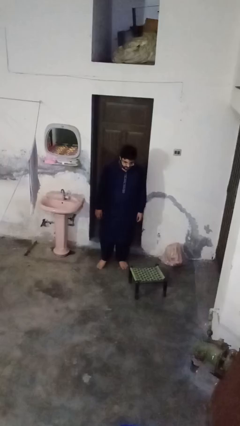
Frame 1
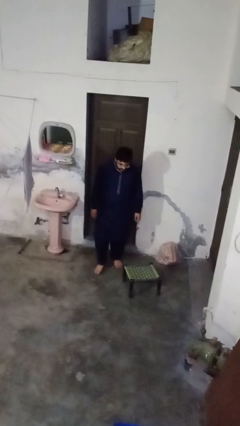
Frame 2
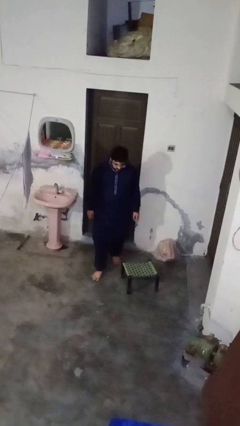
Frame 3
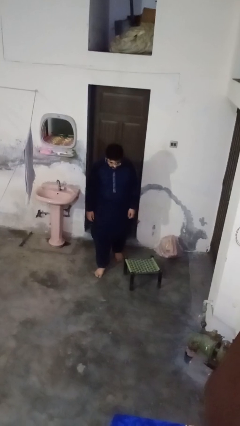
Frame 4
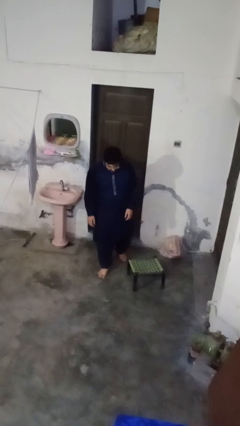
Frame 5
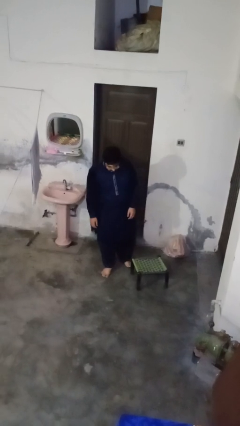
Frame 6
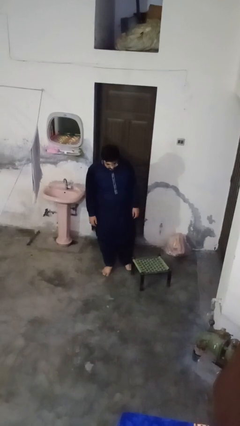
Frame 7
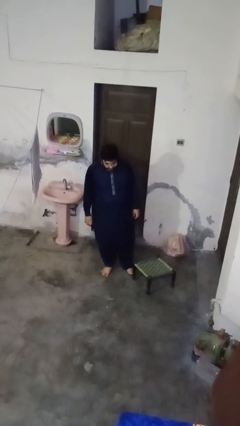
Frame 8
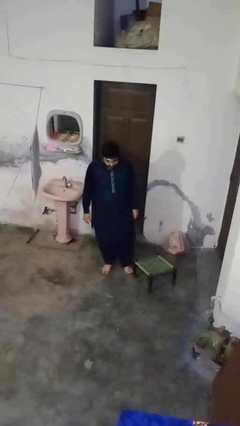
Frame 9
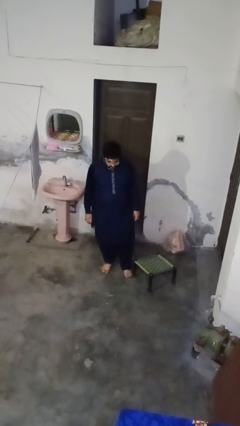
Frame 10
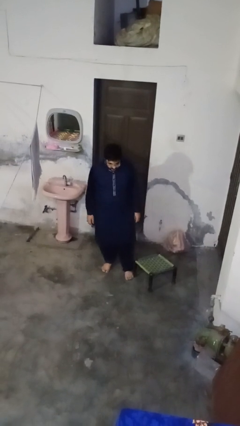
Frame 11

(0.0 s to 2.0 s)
person trips on object on floor

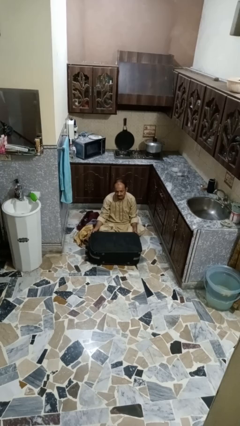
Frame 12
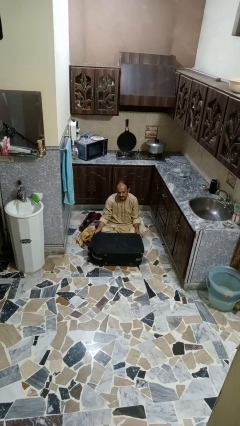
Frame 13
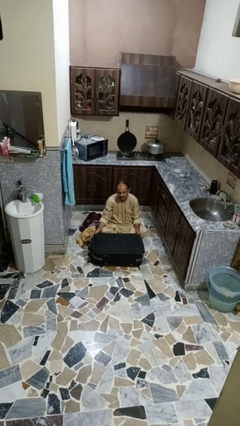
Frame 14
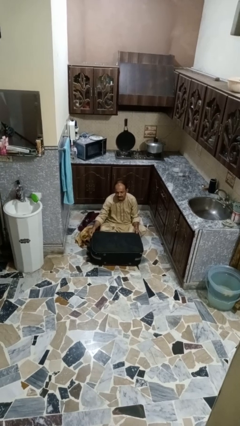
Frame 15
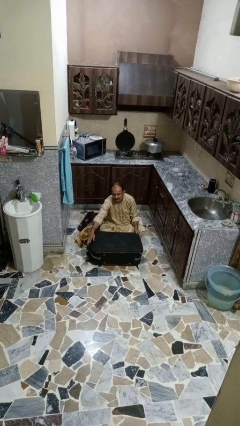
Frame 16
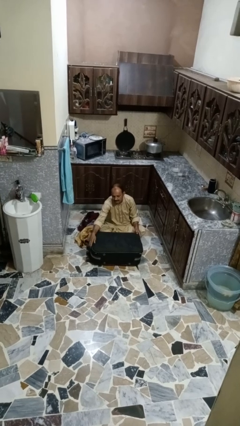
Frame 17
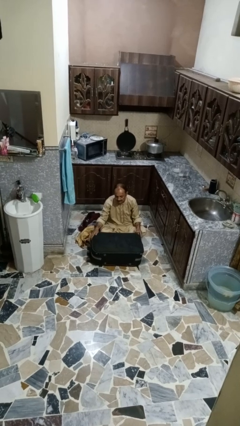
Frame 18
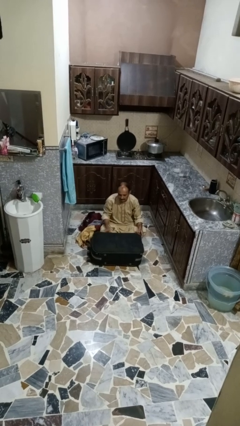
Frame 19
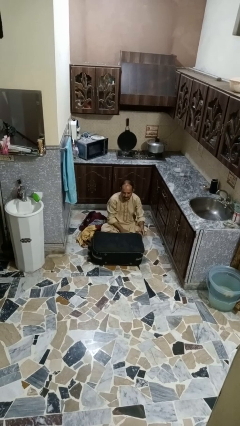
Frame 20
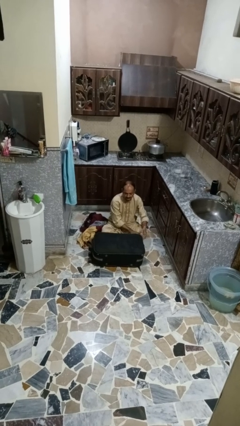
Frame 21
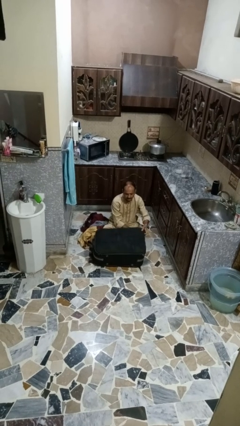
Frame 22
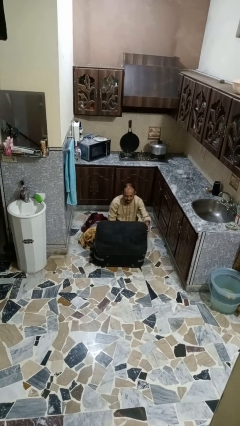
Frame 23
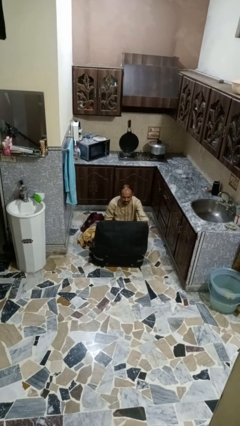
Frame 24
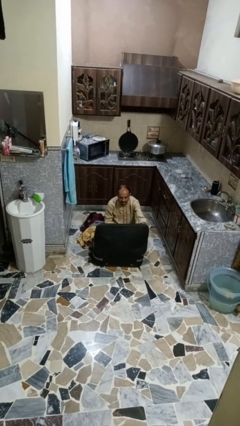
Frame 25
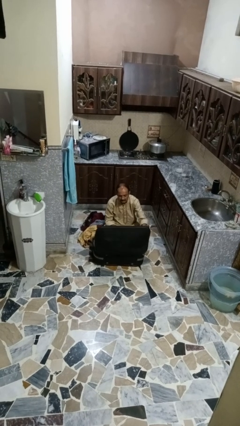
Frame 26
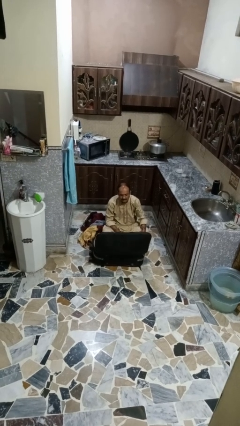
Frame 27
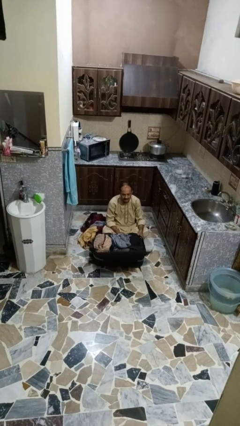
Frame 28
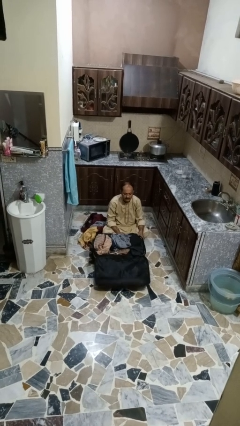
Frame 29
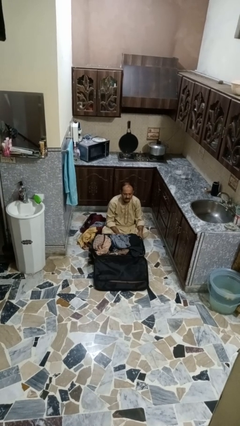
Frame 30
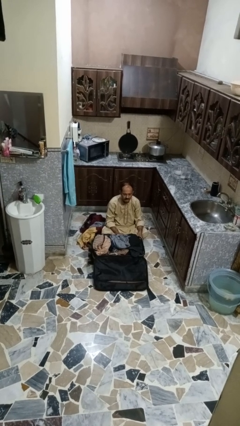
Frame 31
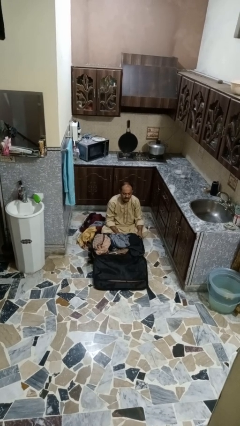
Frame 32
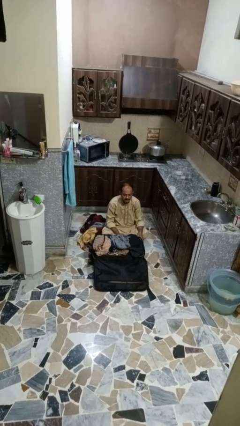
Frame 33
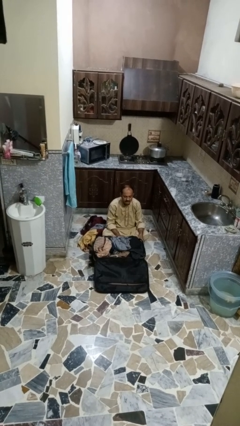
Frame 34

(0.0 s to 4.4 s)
person opens suitcase

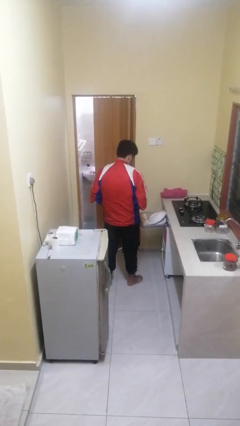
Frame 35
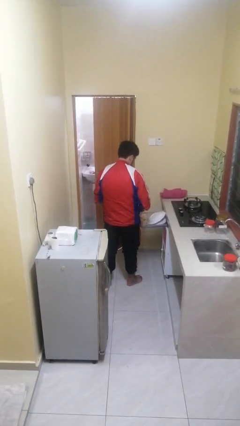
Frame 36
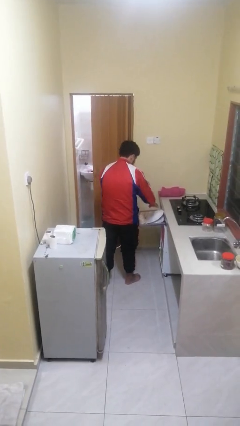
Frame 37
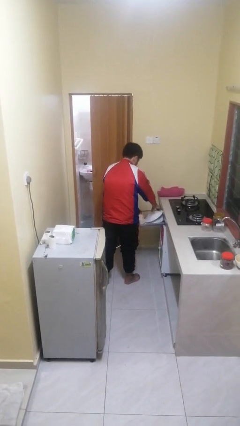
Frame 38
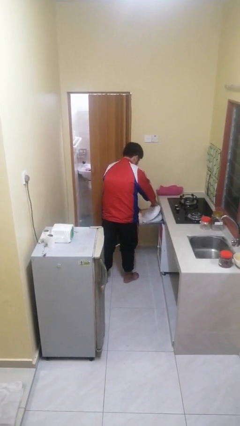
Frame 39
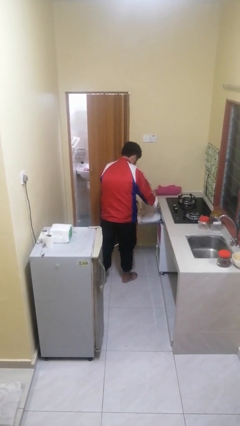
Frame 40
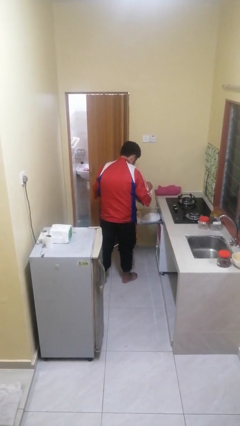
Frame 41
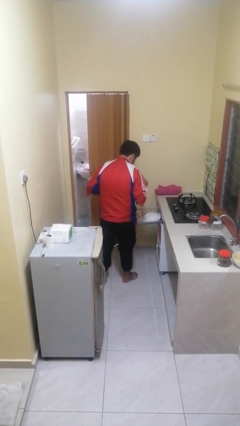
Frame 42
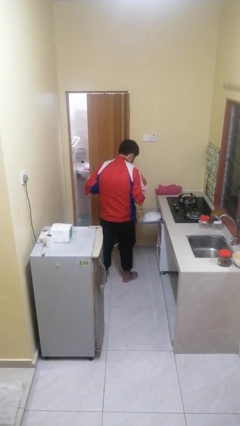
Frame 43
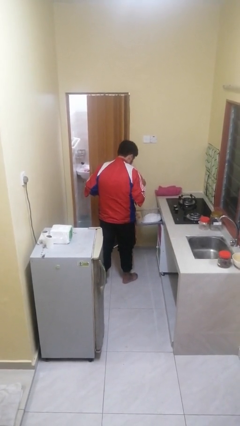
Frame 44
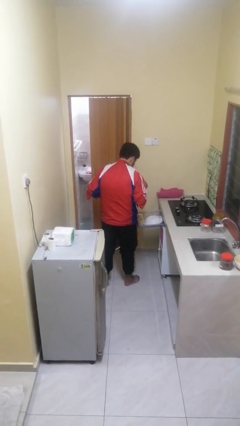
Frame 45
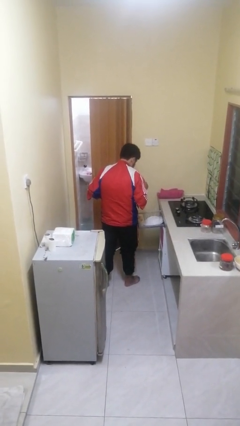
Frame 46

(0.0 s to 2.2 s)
person takes object from kitchen drawer

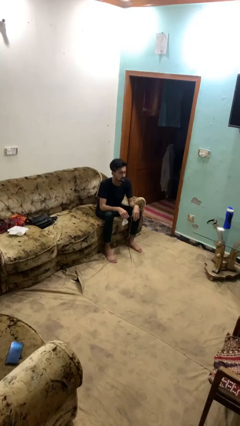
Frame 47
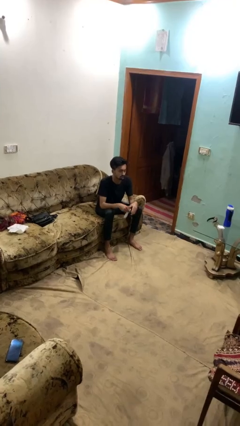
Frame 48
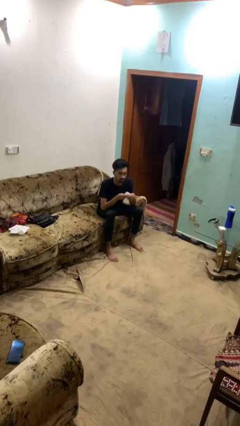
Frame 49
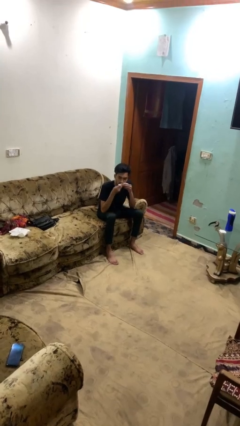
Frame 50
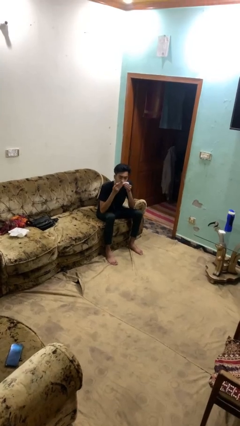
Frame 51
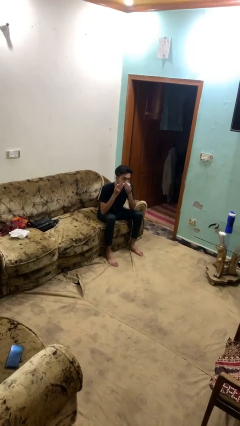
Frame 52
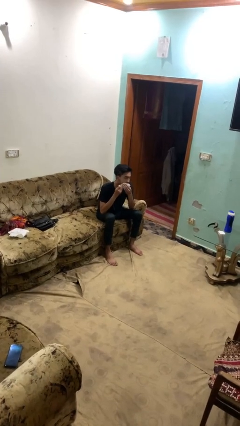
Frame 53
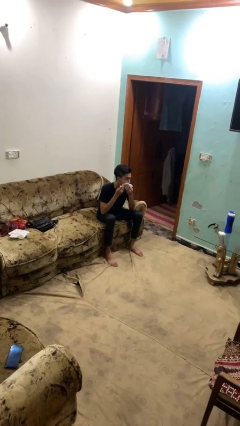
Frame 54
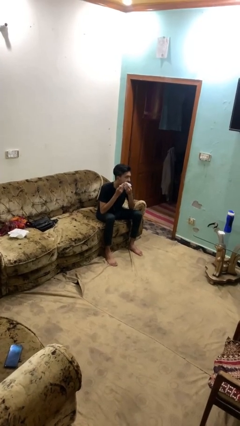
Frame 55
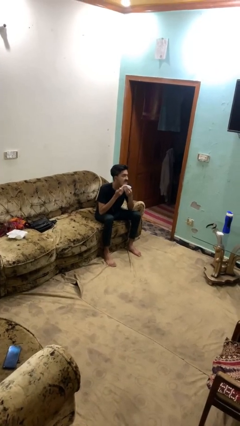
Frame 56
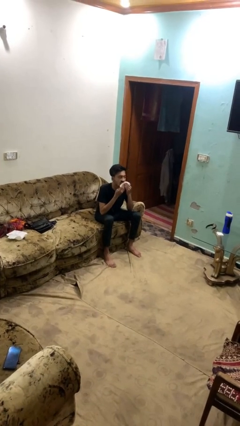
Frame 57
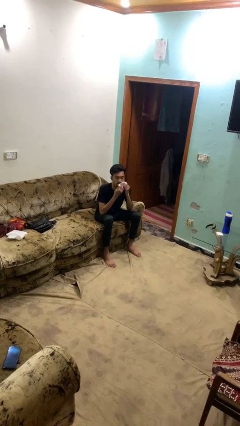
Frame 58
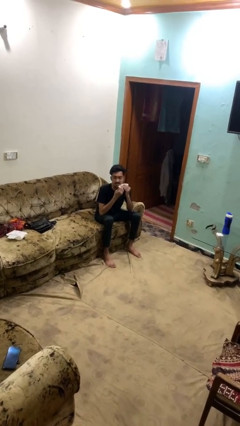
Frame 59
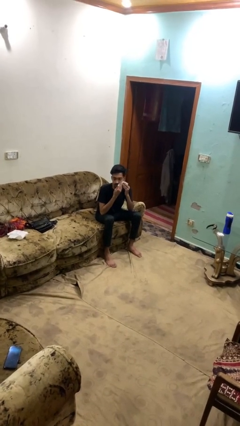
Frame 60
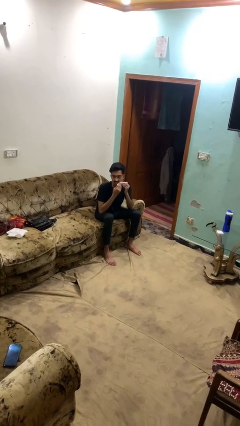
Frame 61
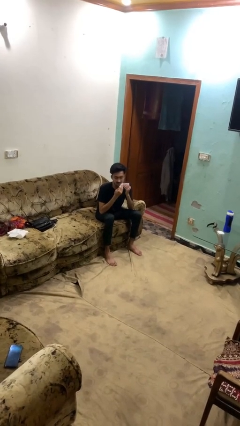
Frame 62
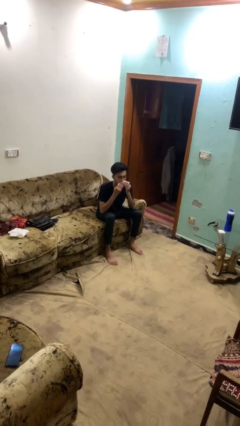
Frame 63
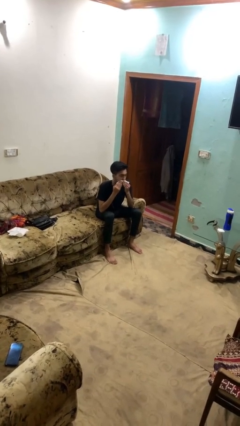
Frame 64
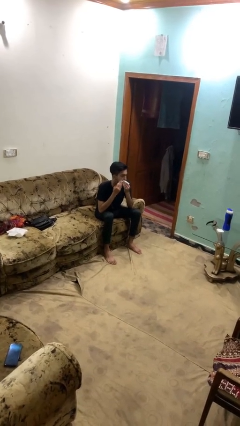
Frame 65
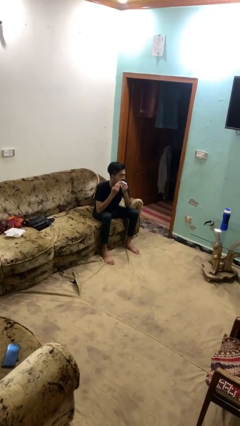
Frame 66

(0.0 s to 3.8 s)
person wipes mouth with napkin

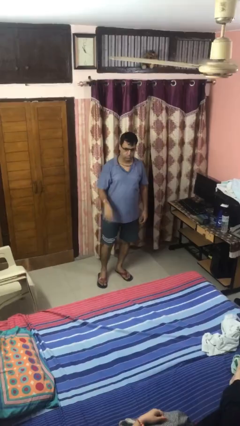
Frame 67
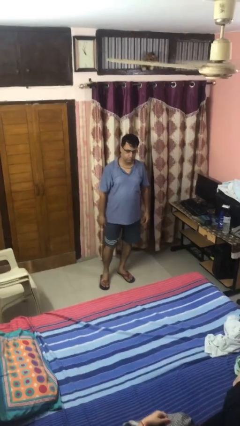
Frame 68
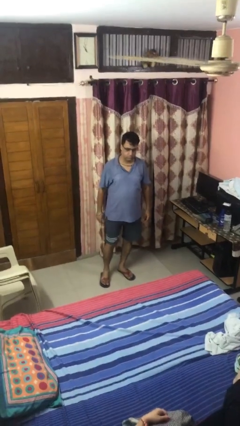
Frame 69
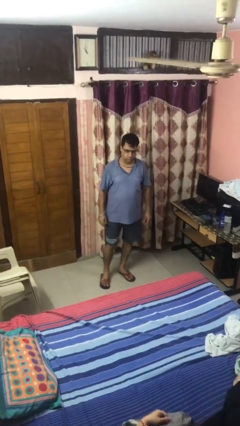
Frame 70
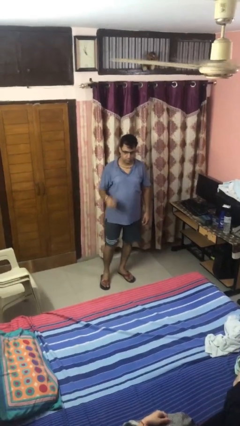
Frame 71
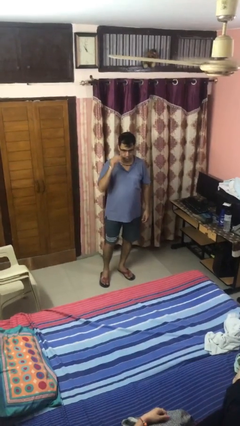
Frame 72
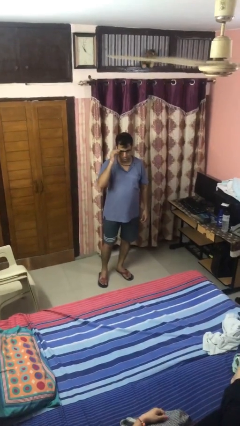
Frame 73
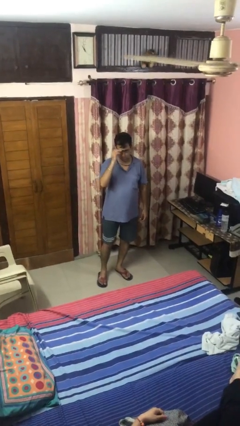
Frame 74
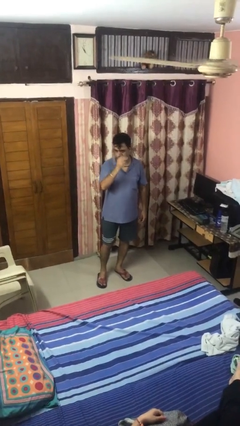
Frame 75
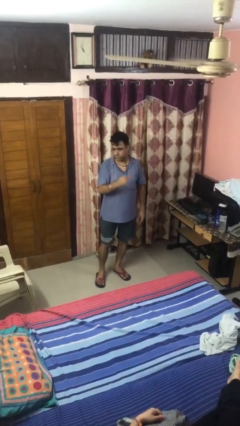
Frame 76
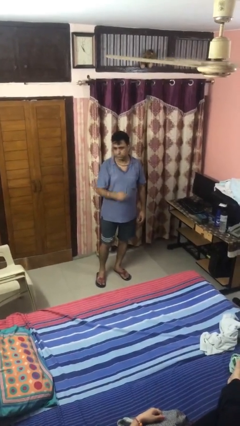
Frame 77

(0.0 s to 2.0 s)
person takes off glasses

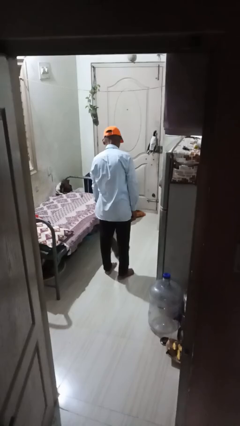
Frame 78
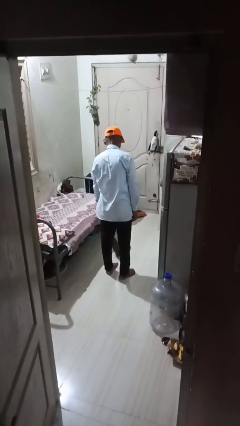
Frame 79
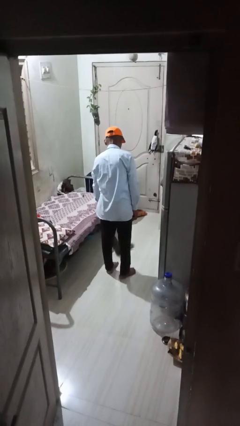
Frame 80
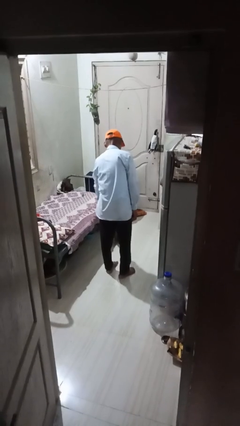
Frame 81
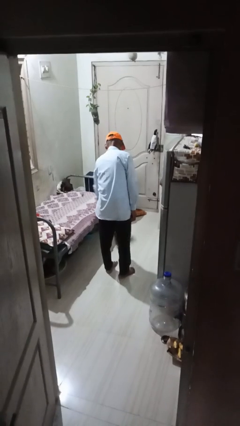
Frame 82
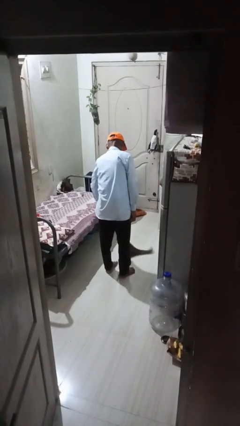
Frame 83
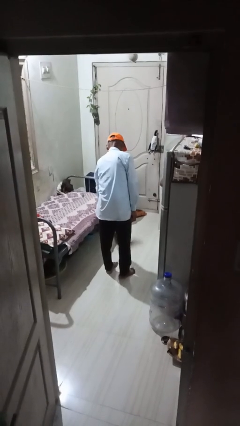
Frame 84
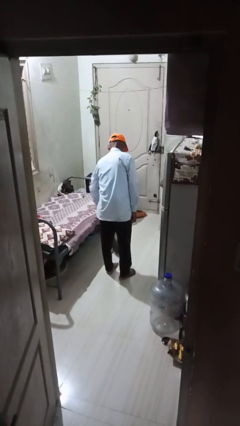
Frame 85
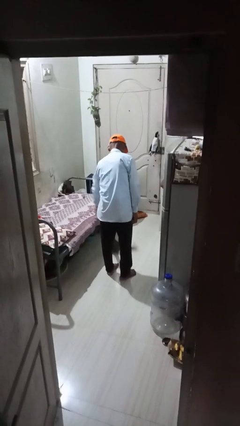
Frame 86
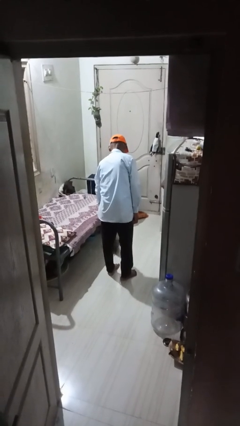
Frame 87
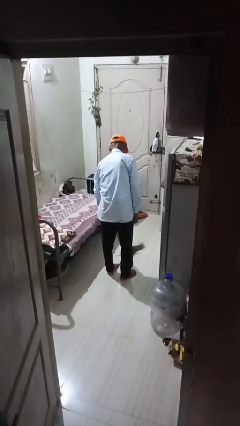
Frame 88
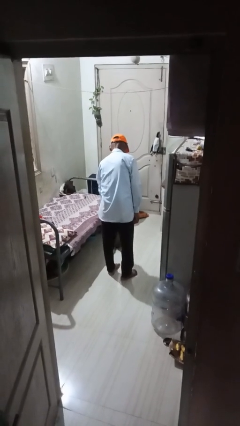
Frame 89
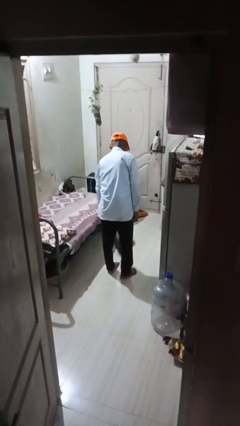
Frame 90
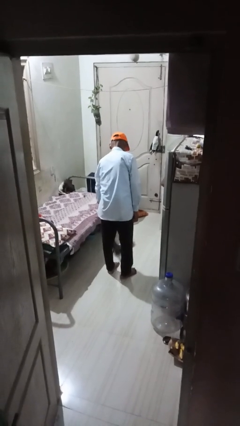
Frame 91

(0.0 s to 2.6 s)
person mops
